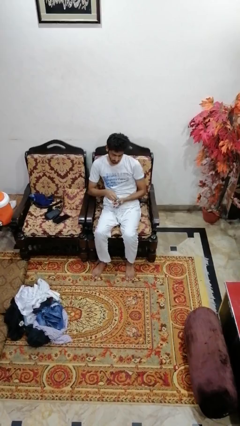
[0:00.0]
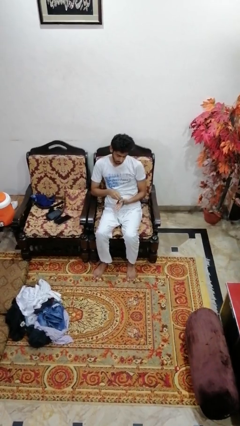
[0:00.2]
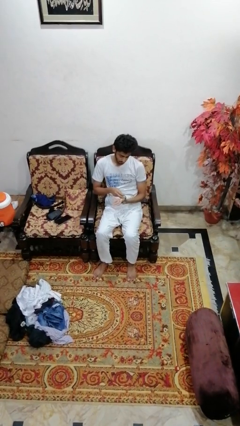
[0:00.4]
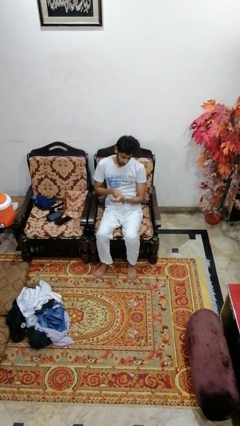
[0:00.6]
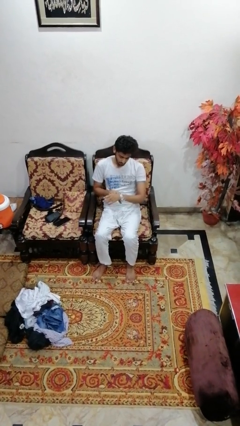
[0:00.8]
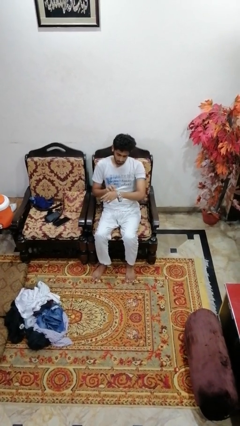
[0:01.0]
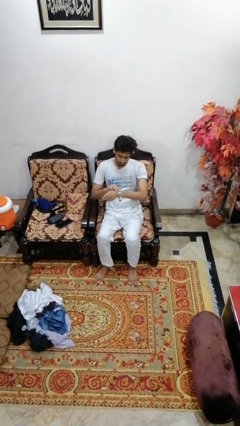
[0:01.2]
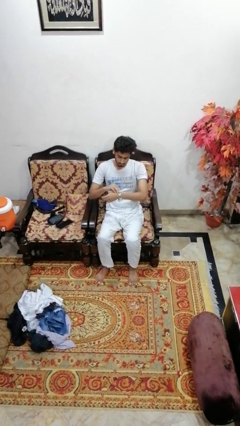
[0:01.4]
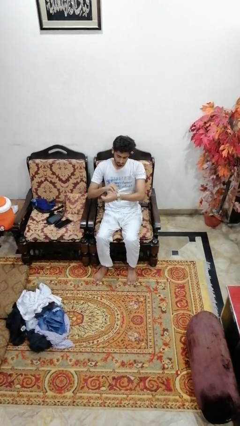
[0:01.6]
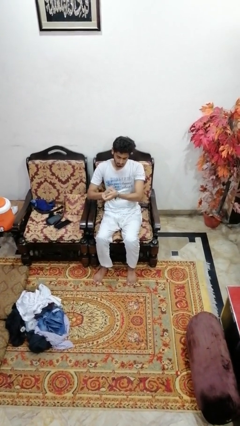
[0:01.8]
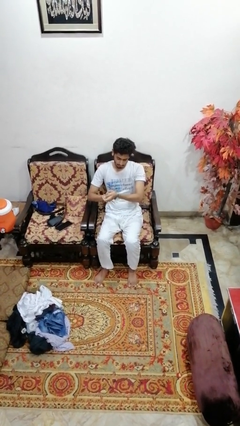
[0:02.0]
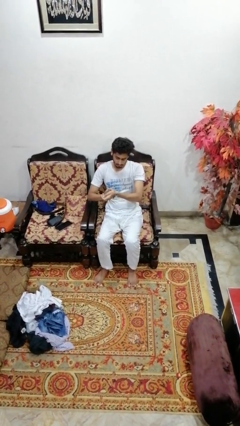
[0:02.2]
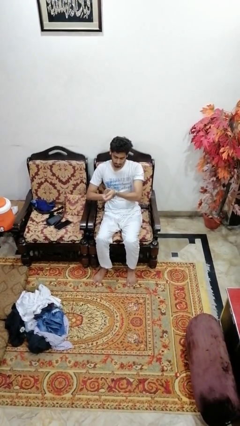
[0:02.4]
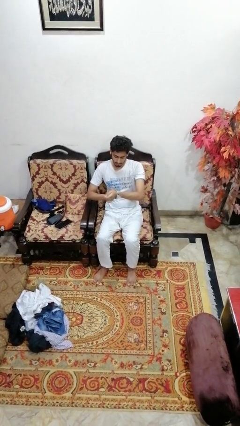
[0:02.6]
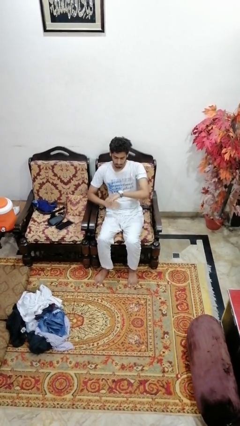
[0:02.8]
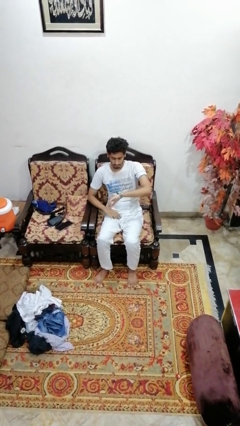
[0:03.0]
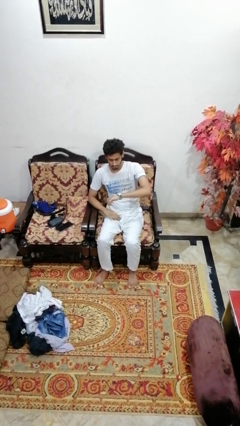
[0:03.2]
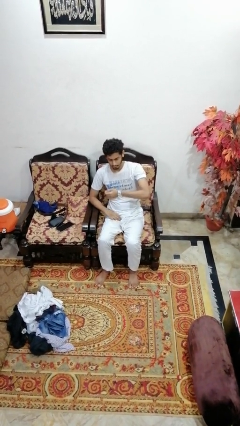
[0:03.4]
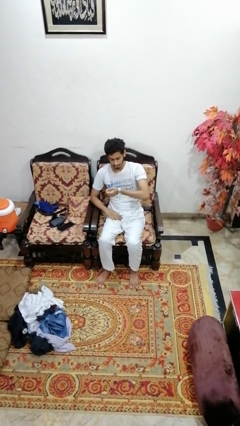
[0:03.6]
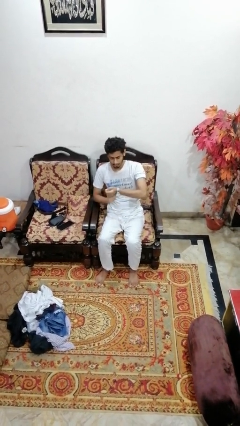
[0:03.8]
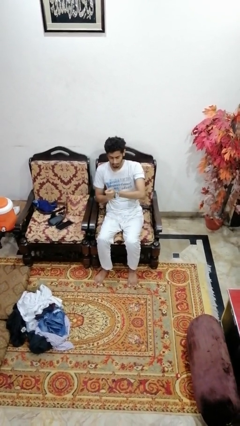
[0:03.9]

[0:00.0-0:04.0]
person puts on wristwatch

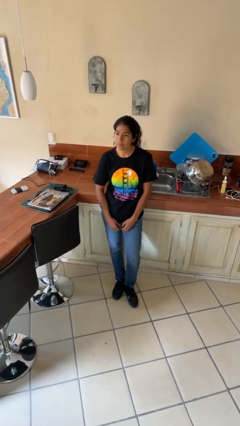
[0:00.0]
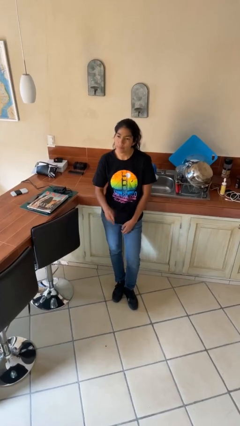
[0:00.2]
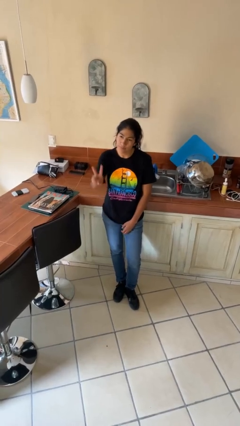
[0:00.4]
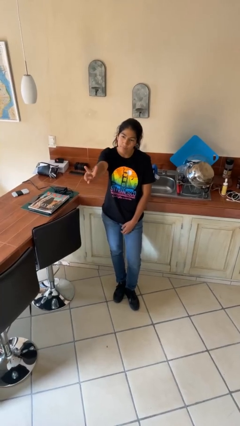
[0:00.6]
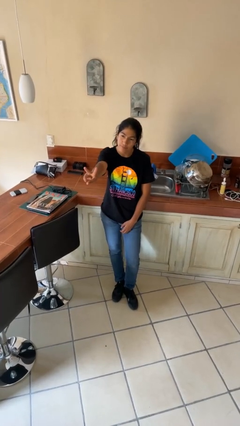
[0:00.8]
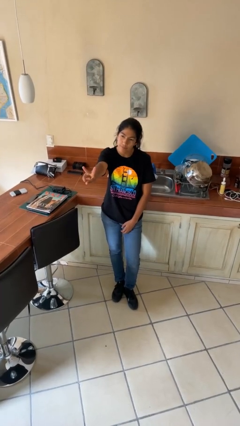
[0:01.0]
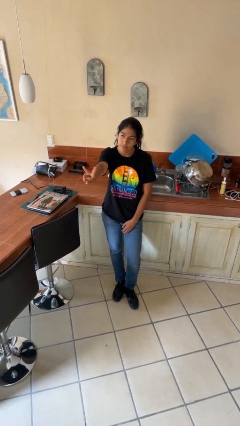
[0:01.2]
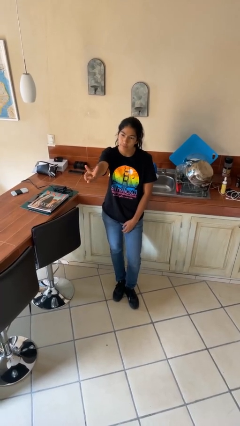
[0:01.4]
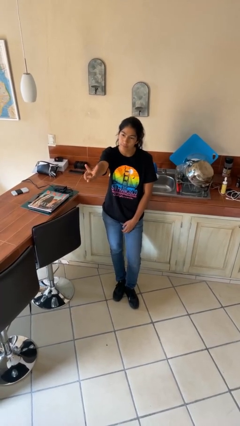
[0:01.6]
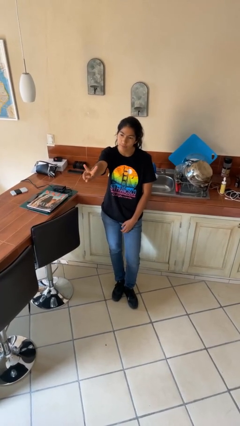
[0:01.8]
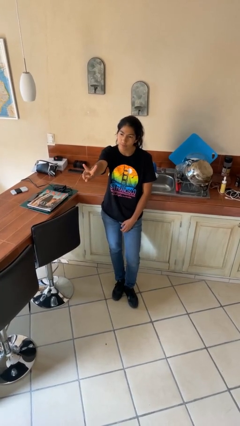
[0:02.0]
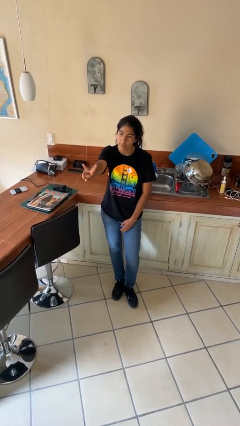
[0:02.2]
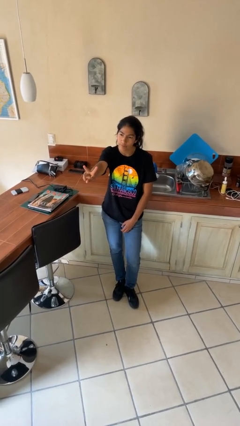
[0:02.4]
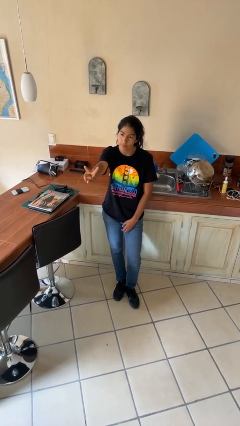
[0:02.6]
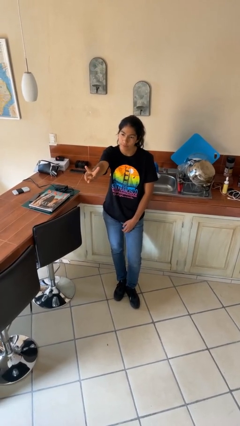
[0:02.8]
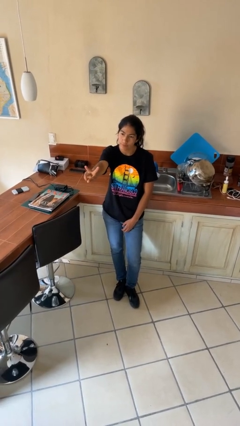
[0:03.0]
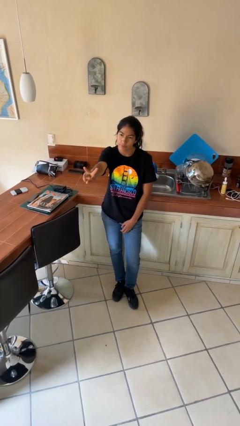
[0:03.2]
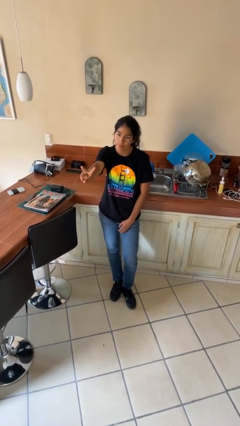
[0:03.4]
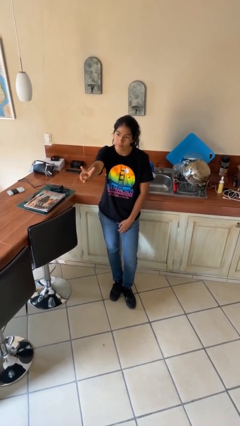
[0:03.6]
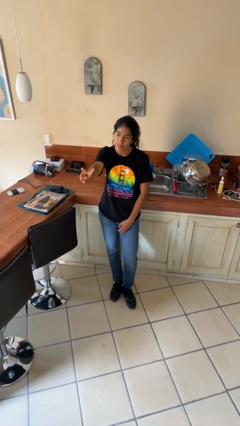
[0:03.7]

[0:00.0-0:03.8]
person gestures peace

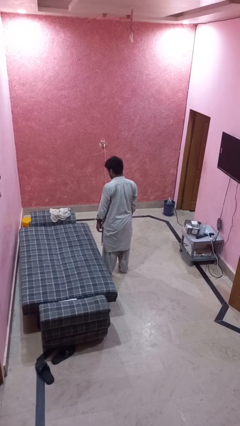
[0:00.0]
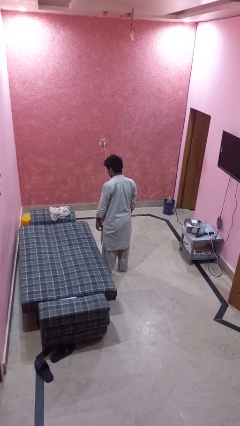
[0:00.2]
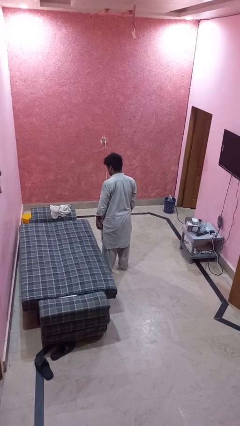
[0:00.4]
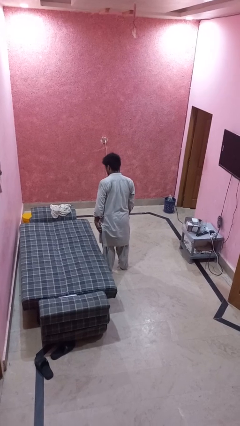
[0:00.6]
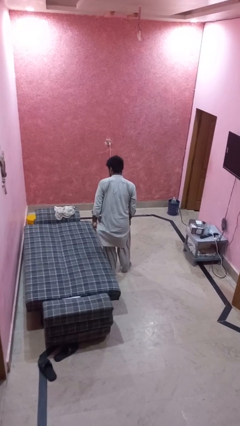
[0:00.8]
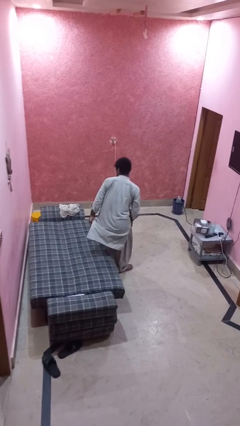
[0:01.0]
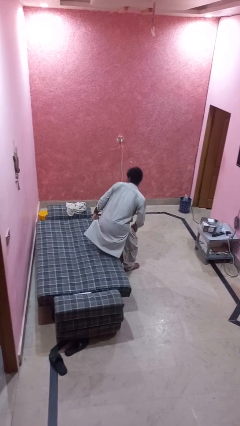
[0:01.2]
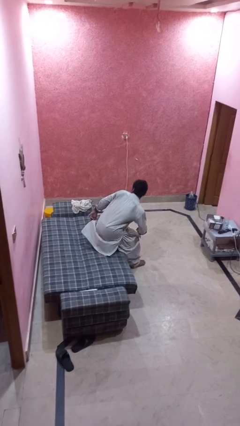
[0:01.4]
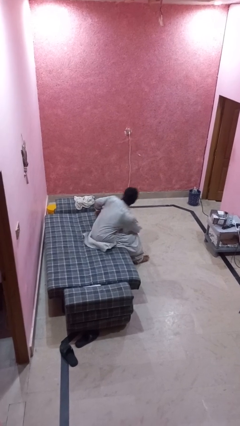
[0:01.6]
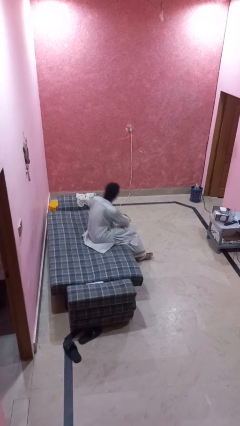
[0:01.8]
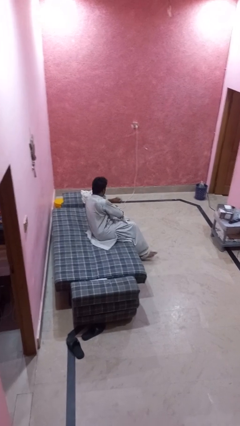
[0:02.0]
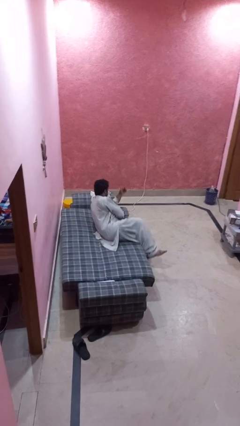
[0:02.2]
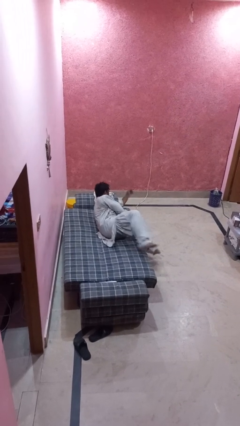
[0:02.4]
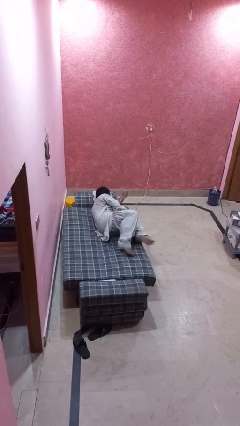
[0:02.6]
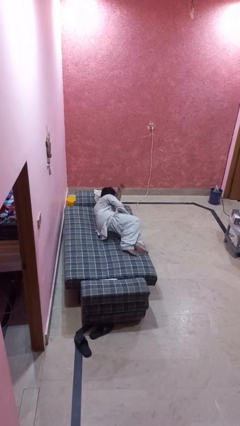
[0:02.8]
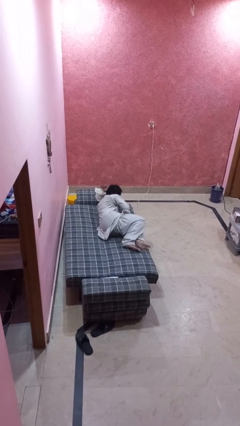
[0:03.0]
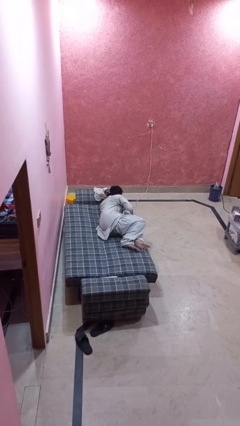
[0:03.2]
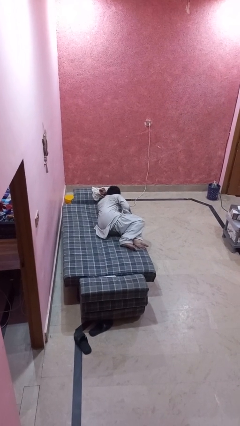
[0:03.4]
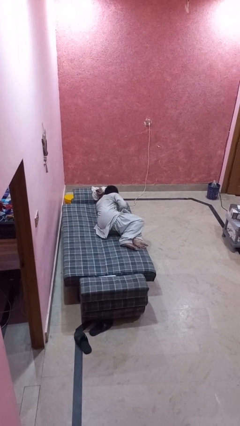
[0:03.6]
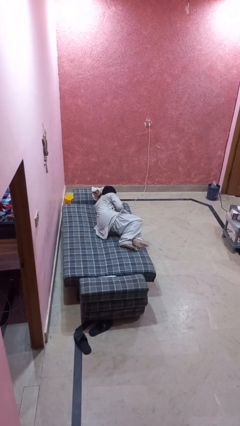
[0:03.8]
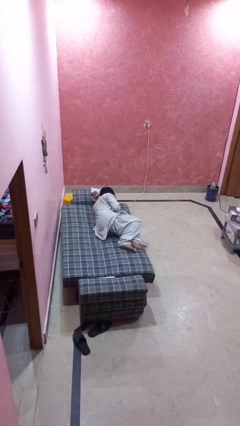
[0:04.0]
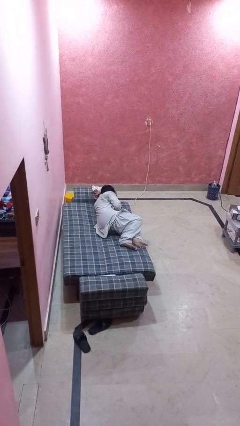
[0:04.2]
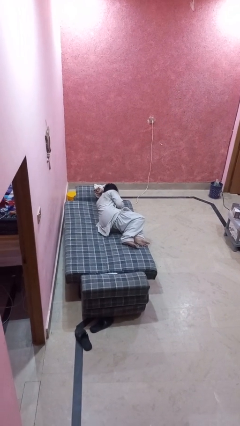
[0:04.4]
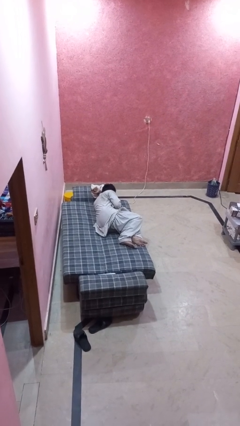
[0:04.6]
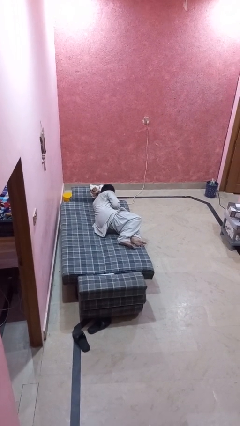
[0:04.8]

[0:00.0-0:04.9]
person lies down on bed

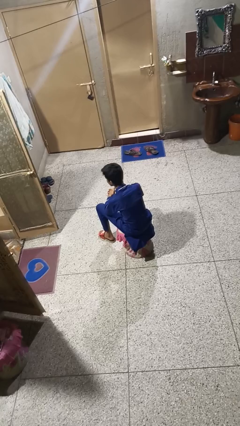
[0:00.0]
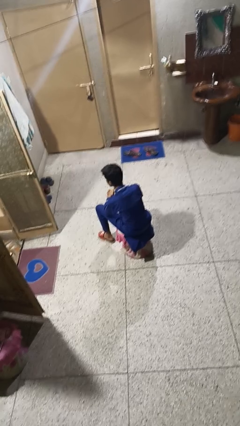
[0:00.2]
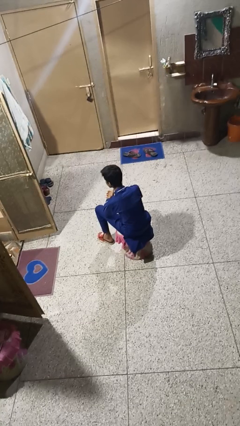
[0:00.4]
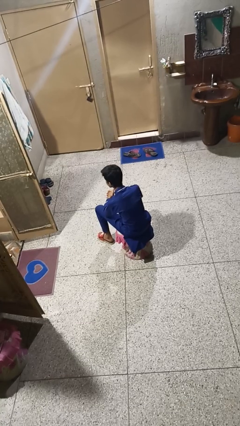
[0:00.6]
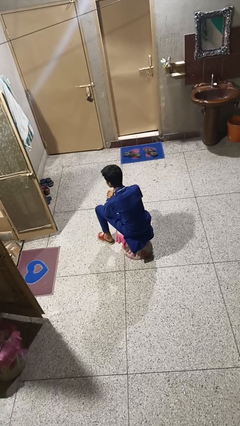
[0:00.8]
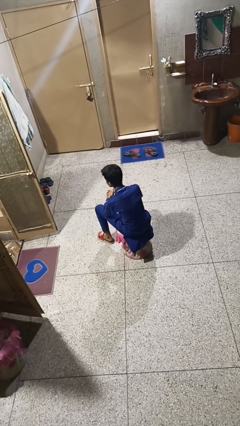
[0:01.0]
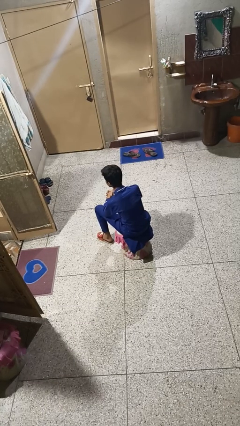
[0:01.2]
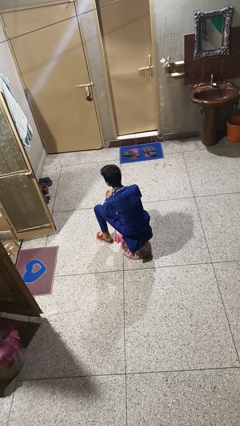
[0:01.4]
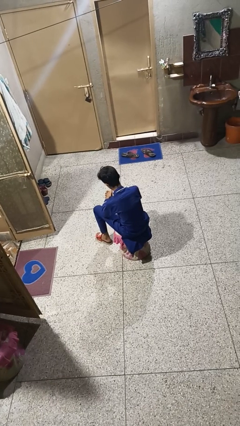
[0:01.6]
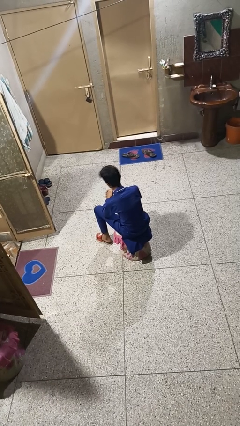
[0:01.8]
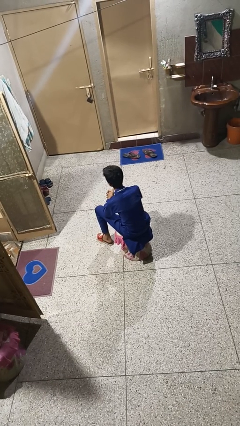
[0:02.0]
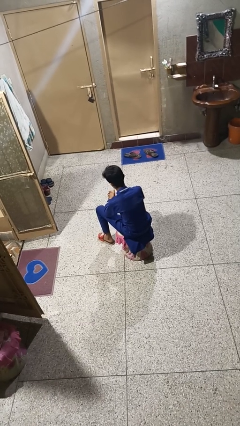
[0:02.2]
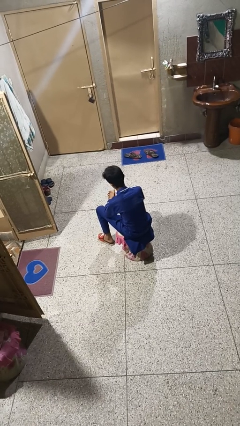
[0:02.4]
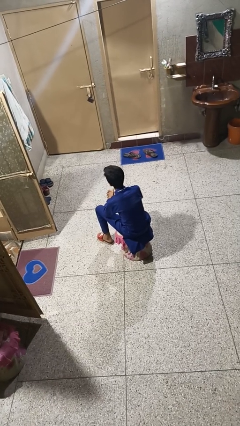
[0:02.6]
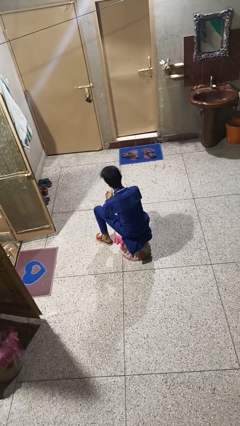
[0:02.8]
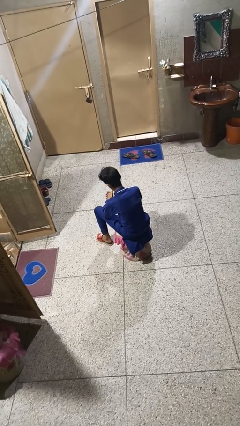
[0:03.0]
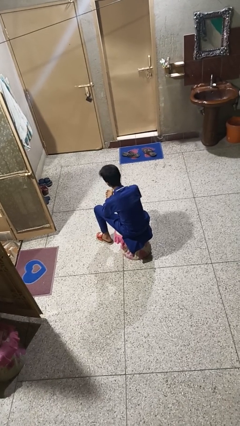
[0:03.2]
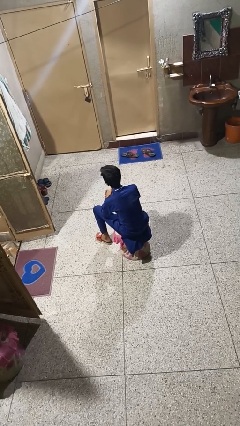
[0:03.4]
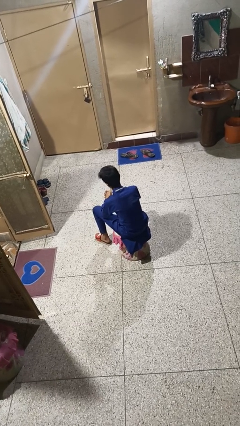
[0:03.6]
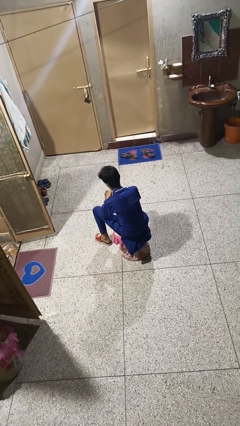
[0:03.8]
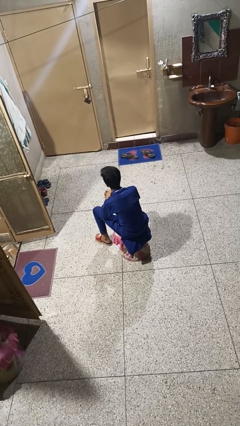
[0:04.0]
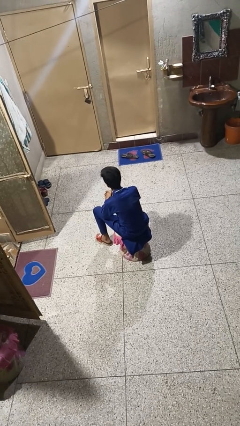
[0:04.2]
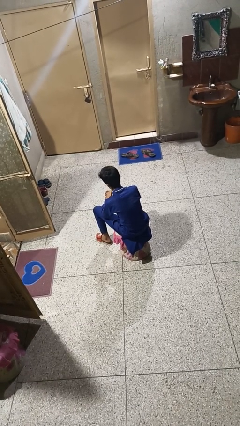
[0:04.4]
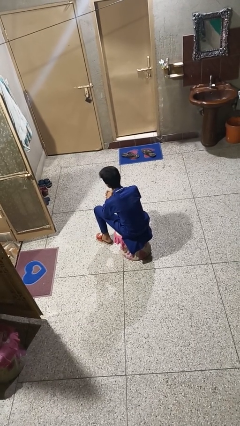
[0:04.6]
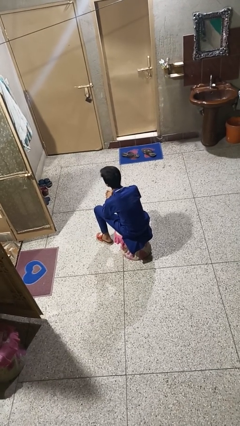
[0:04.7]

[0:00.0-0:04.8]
person nods head

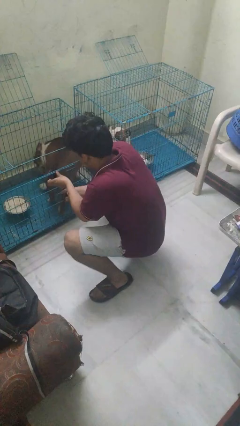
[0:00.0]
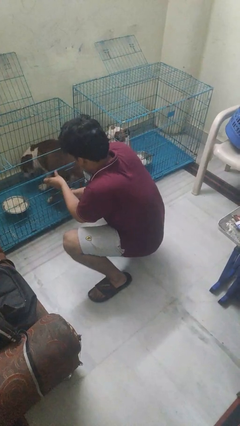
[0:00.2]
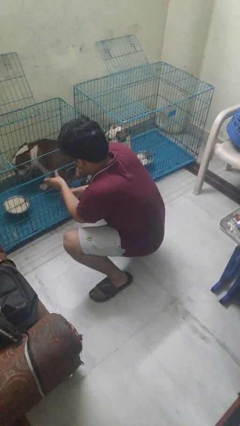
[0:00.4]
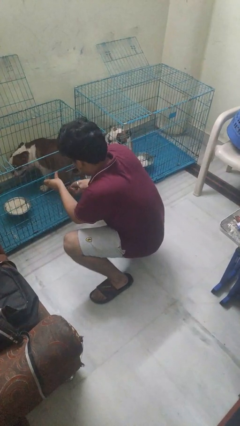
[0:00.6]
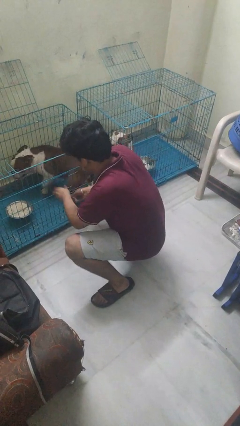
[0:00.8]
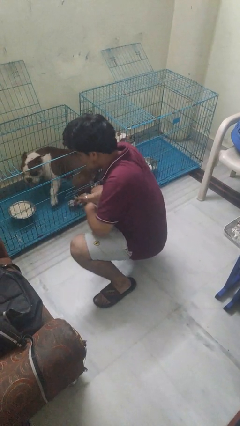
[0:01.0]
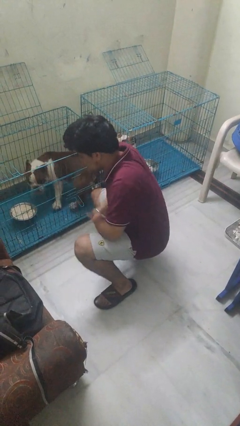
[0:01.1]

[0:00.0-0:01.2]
person crates dog
